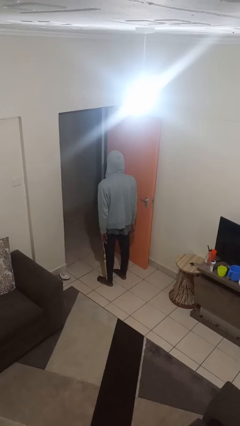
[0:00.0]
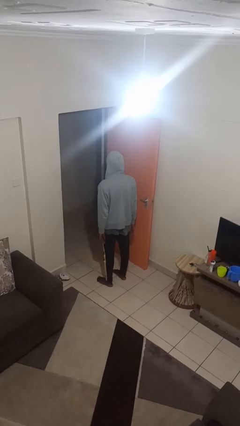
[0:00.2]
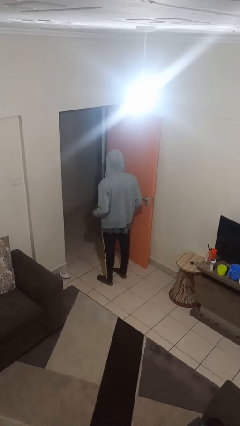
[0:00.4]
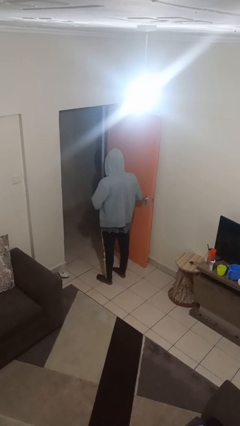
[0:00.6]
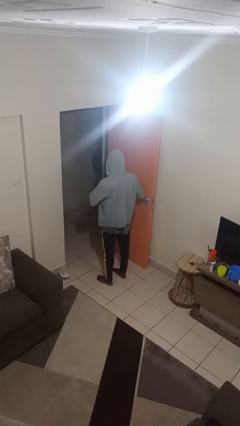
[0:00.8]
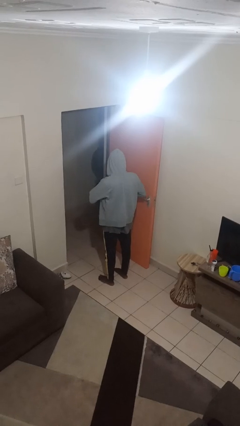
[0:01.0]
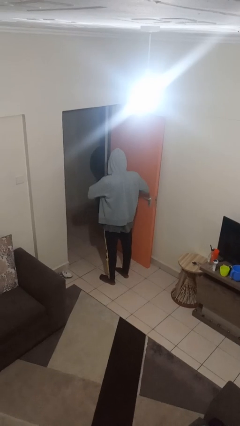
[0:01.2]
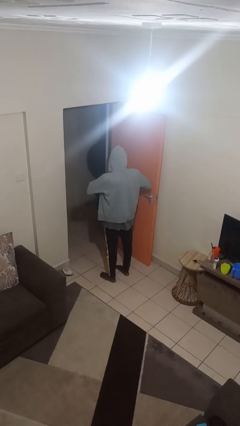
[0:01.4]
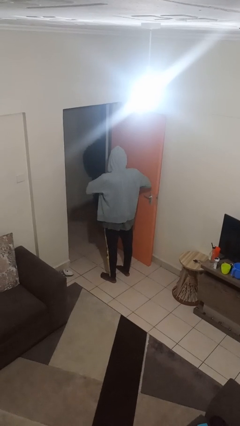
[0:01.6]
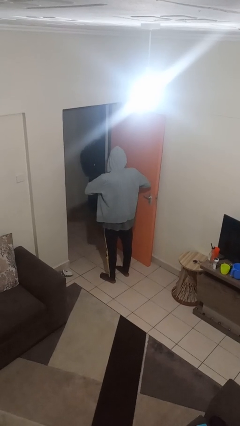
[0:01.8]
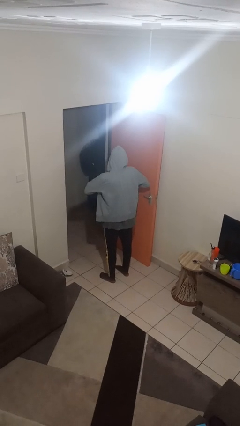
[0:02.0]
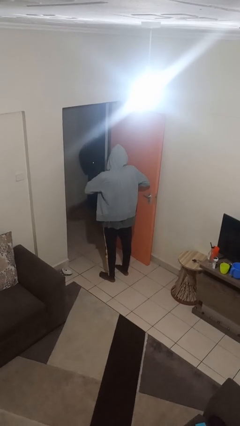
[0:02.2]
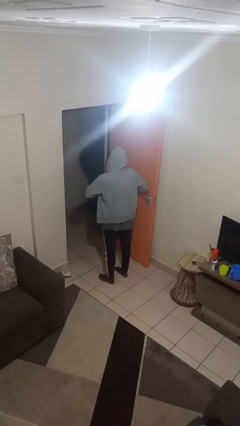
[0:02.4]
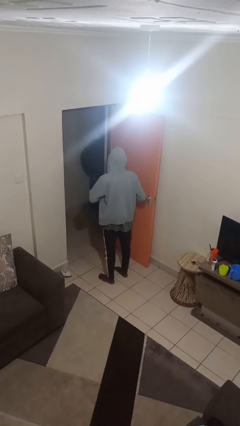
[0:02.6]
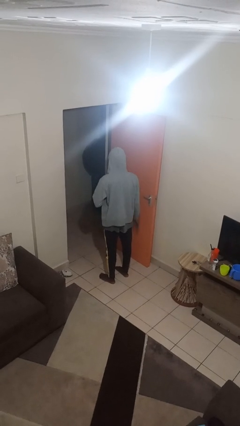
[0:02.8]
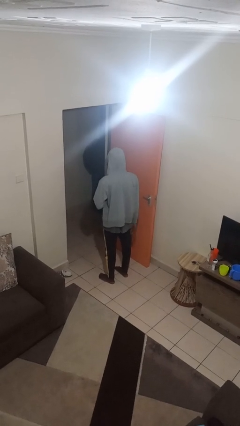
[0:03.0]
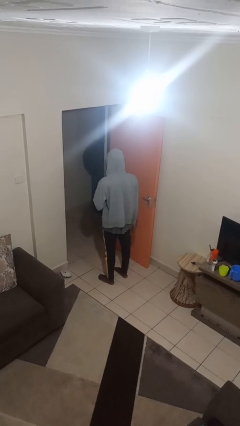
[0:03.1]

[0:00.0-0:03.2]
person puts on ring

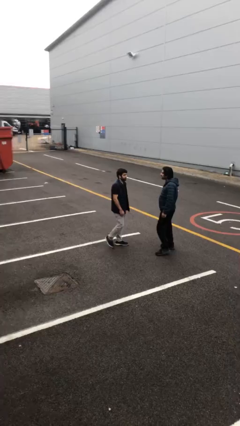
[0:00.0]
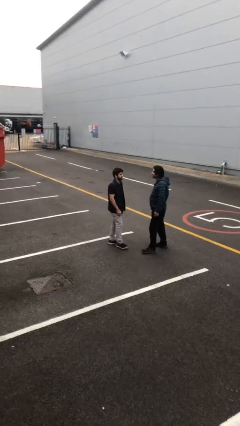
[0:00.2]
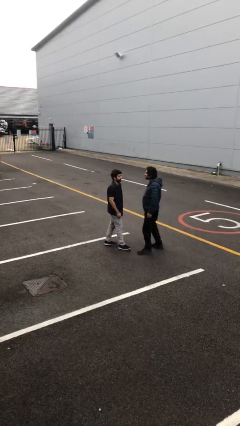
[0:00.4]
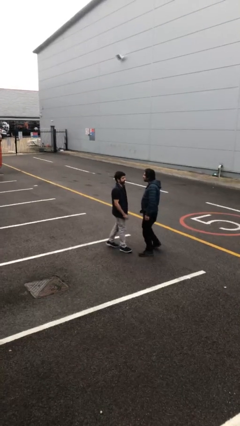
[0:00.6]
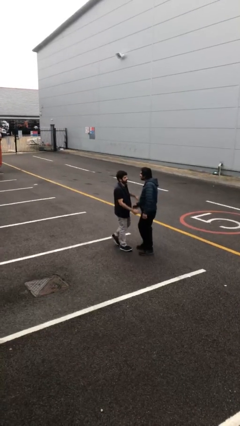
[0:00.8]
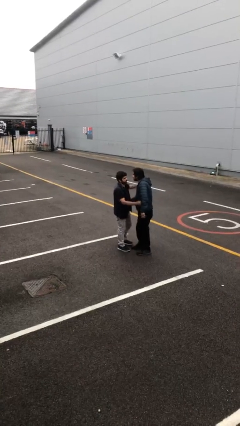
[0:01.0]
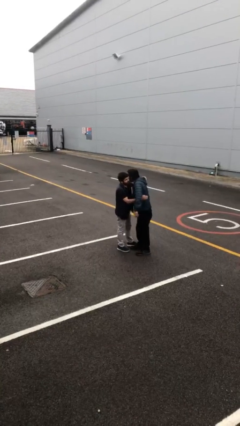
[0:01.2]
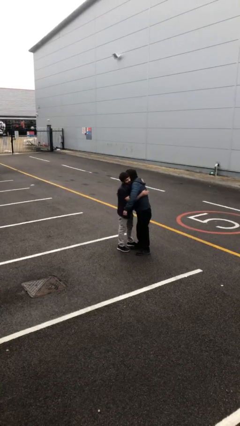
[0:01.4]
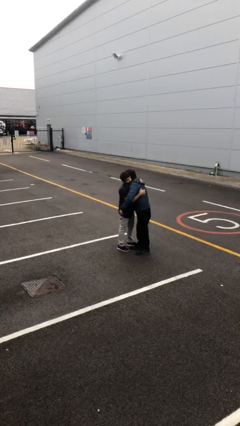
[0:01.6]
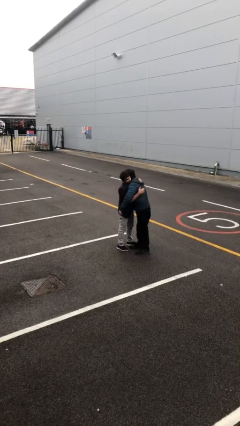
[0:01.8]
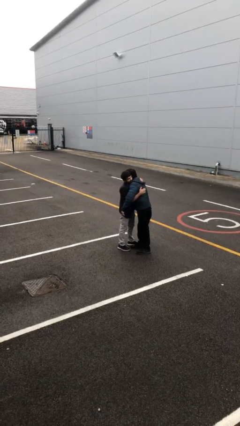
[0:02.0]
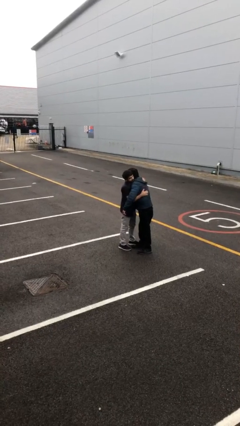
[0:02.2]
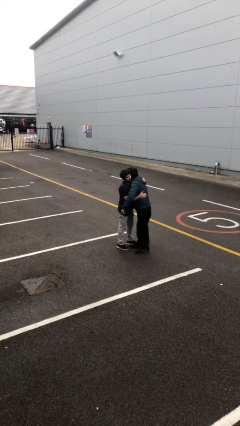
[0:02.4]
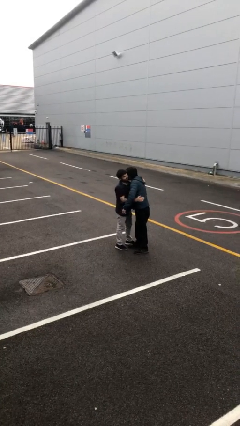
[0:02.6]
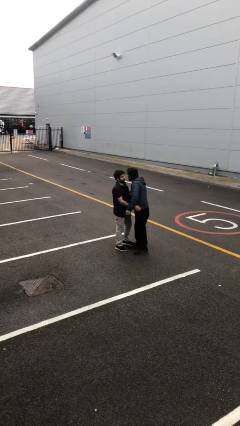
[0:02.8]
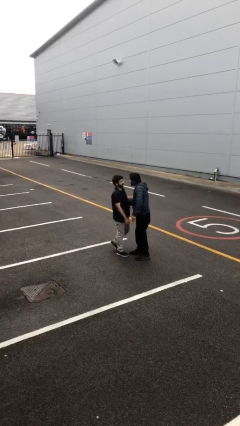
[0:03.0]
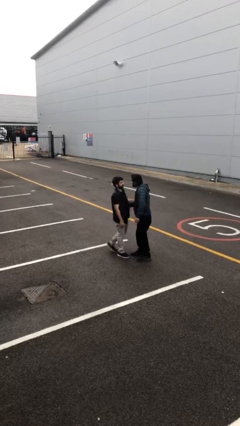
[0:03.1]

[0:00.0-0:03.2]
person embraces person

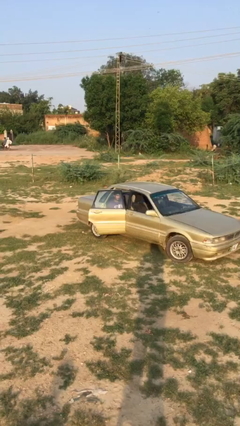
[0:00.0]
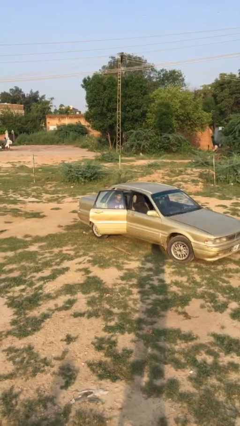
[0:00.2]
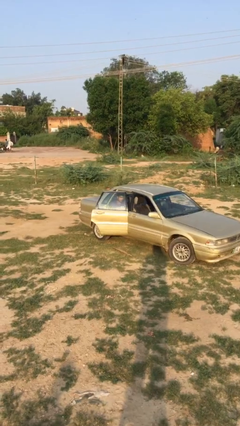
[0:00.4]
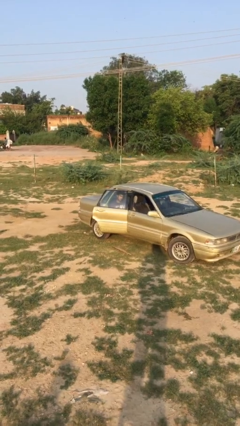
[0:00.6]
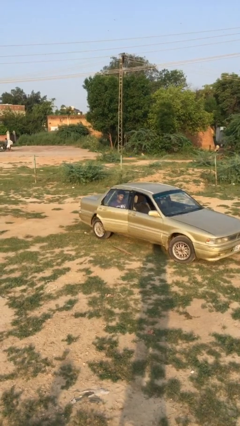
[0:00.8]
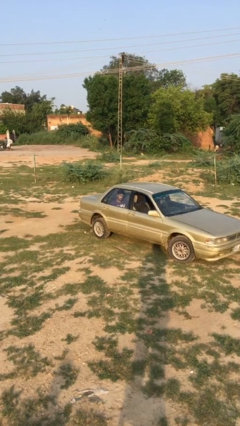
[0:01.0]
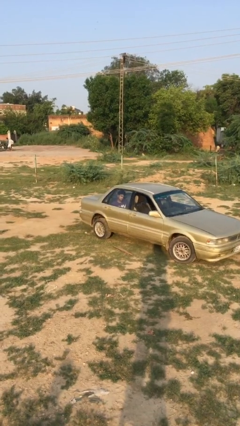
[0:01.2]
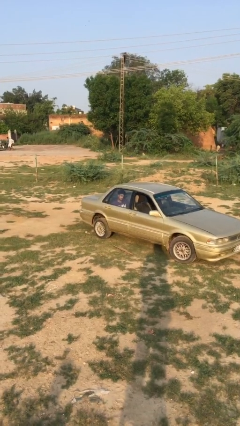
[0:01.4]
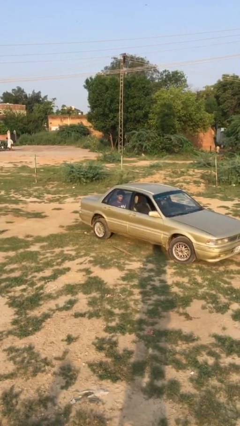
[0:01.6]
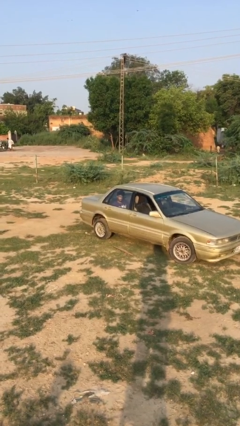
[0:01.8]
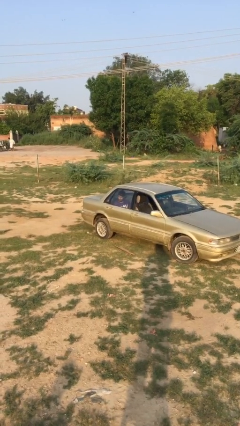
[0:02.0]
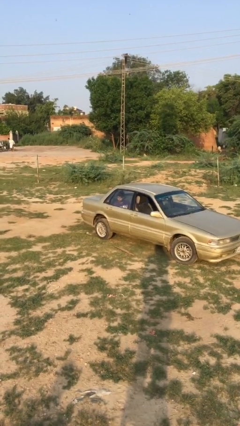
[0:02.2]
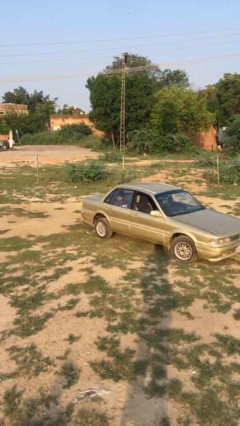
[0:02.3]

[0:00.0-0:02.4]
person closes car door

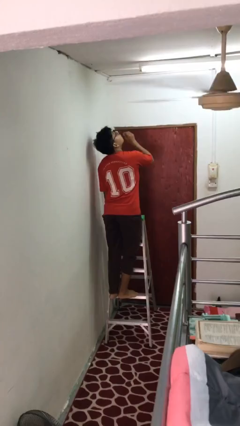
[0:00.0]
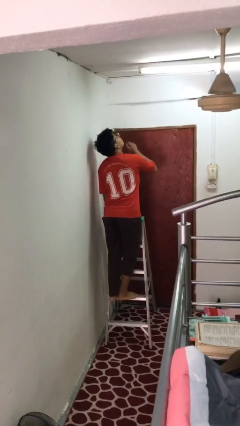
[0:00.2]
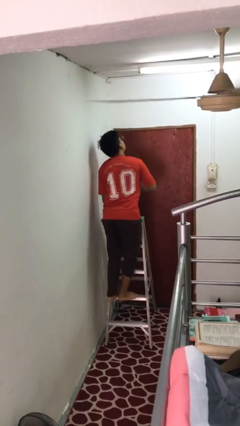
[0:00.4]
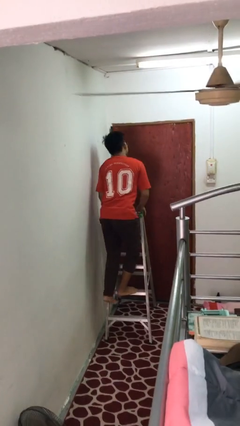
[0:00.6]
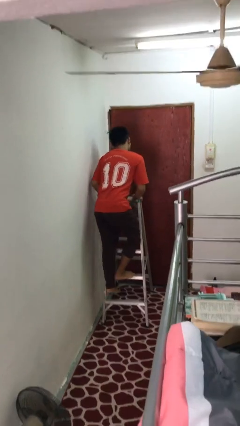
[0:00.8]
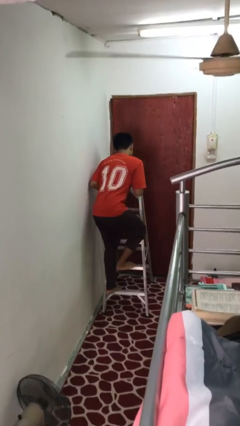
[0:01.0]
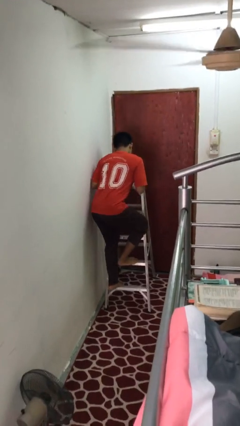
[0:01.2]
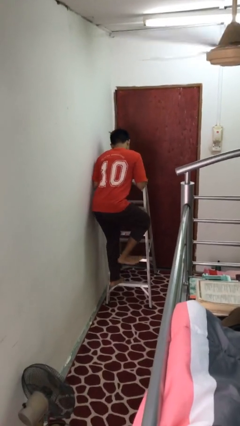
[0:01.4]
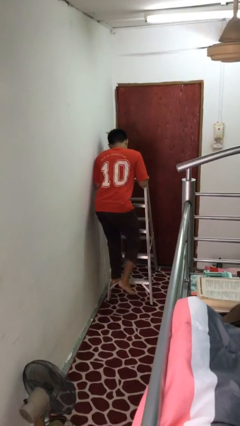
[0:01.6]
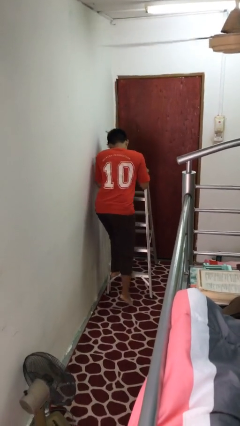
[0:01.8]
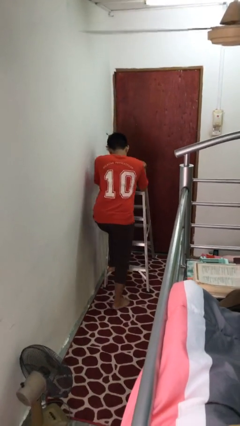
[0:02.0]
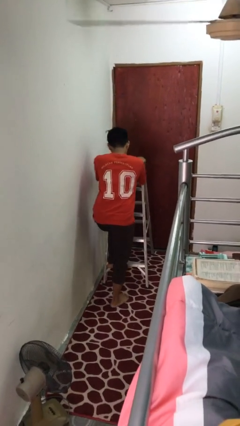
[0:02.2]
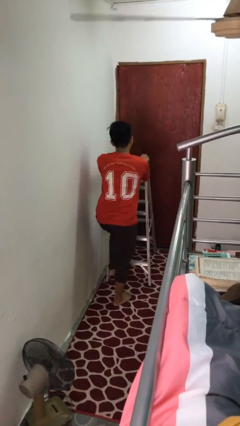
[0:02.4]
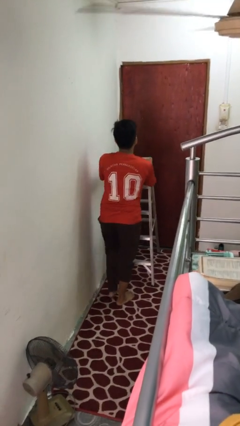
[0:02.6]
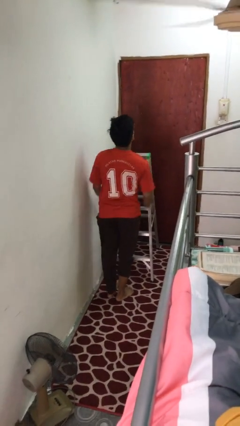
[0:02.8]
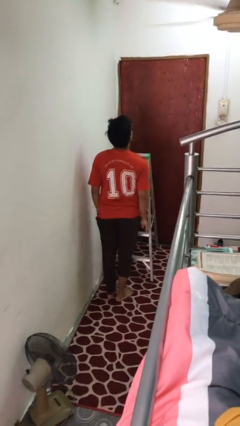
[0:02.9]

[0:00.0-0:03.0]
person climbs down ladder

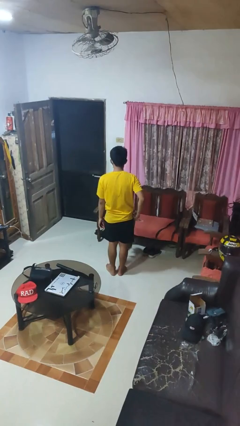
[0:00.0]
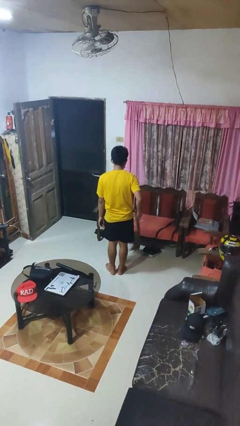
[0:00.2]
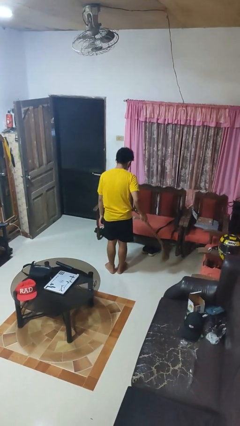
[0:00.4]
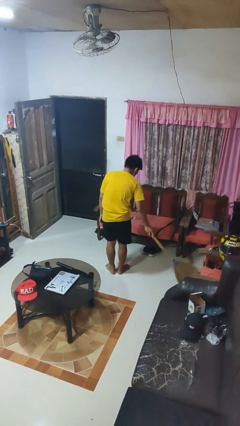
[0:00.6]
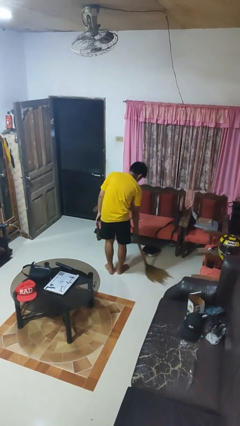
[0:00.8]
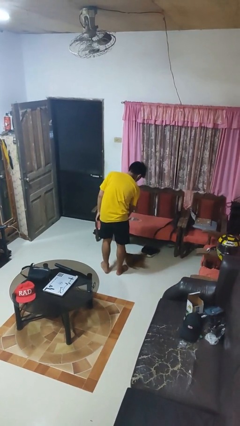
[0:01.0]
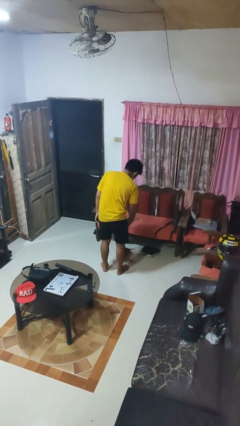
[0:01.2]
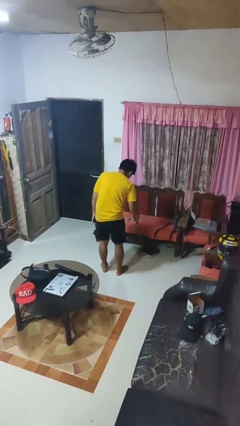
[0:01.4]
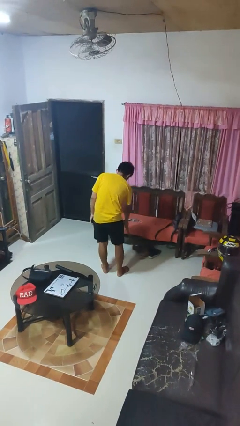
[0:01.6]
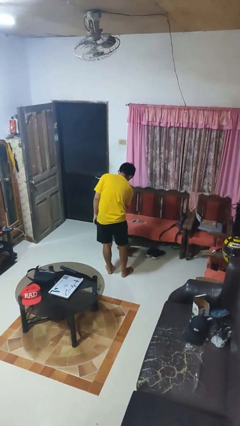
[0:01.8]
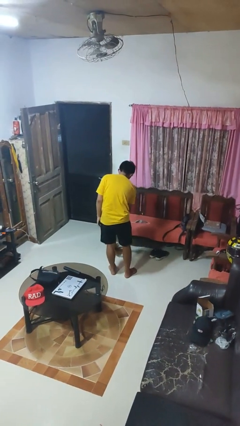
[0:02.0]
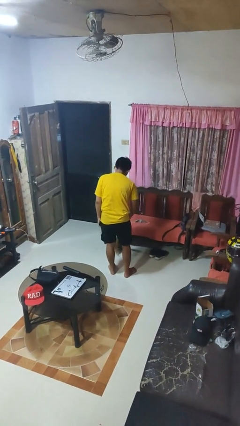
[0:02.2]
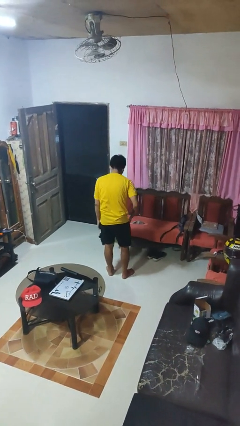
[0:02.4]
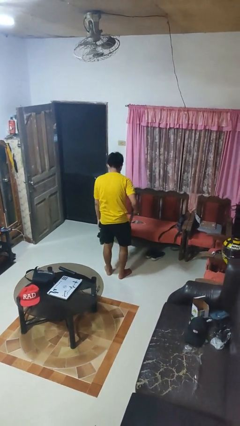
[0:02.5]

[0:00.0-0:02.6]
person sweeps floor

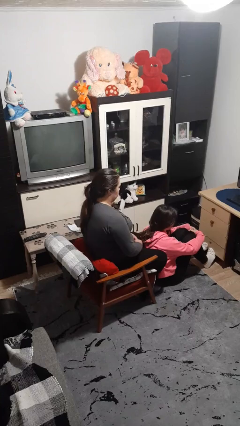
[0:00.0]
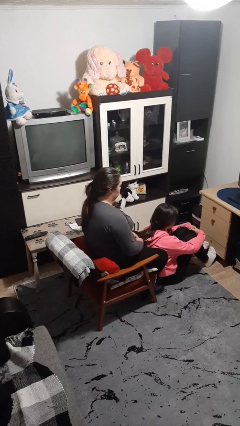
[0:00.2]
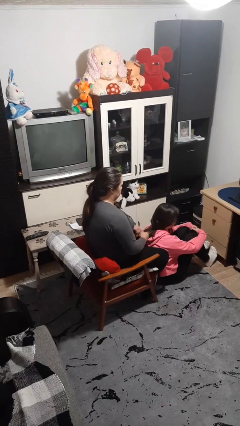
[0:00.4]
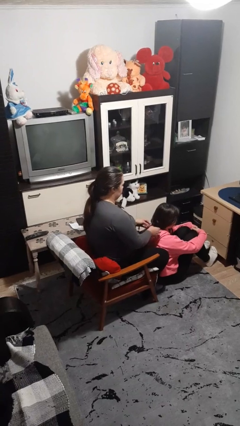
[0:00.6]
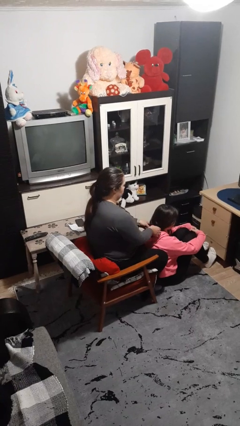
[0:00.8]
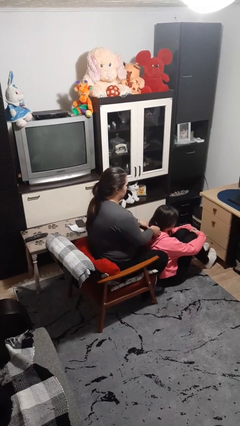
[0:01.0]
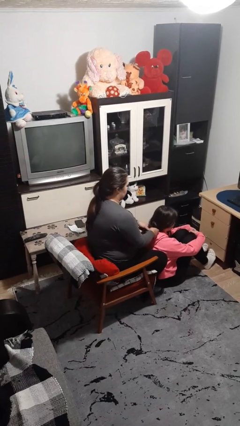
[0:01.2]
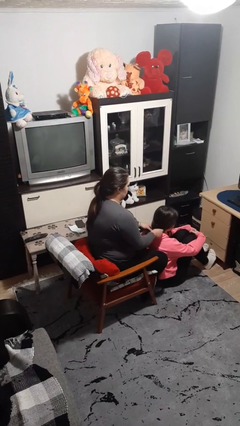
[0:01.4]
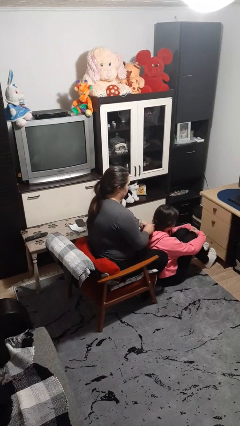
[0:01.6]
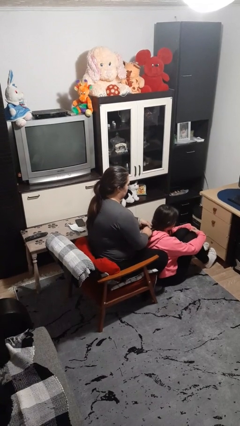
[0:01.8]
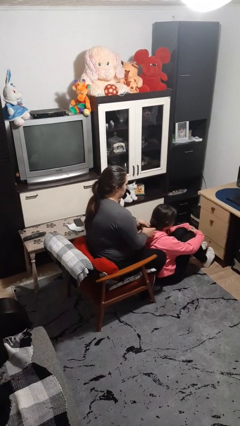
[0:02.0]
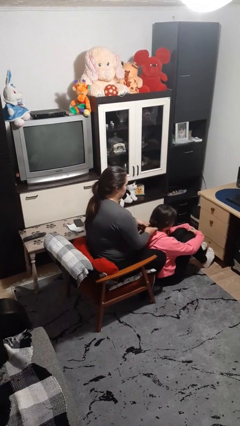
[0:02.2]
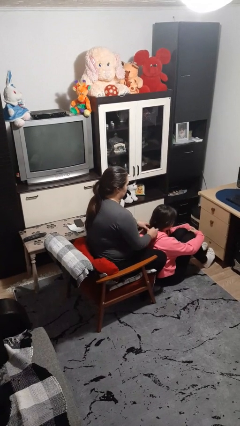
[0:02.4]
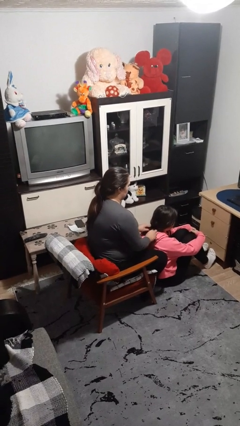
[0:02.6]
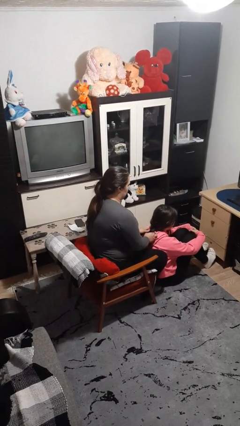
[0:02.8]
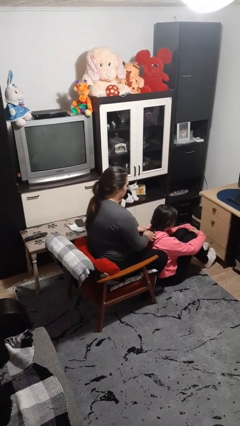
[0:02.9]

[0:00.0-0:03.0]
person braids hair of person
